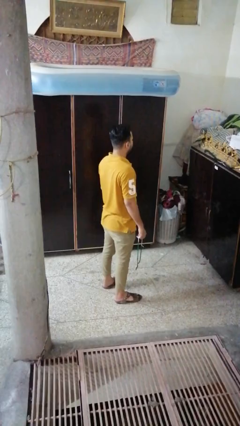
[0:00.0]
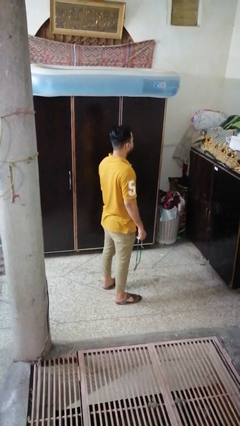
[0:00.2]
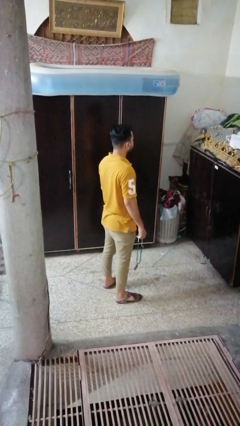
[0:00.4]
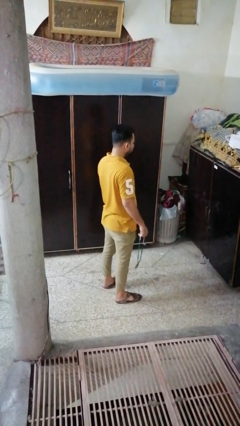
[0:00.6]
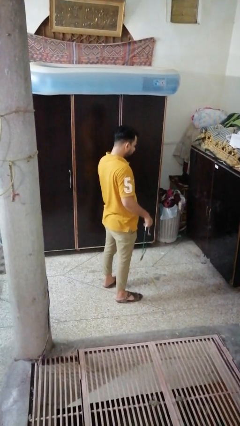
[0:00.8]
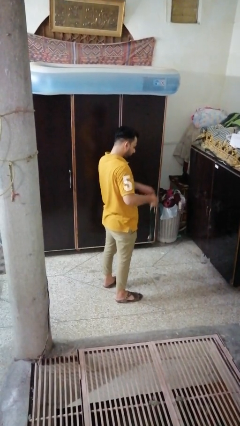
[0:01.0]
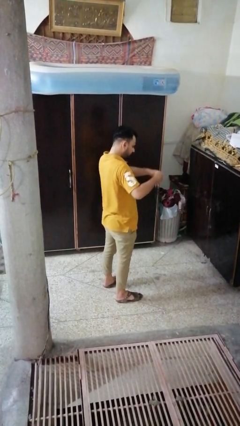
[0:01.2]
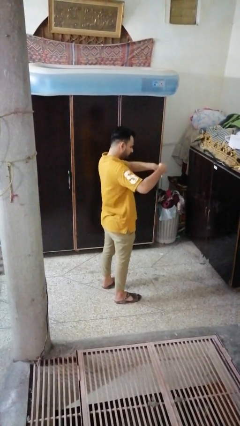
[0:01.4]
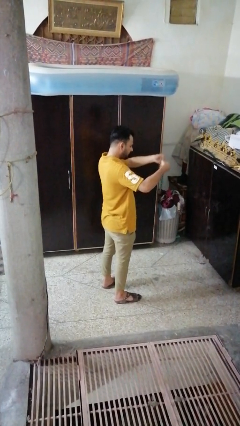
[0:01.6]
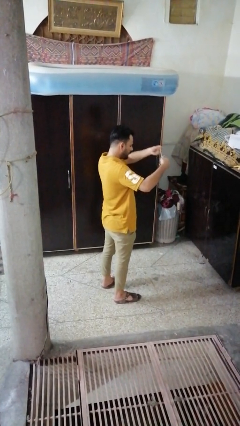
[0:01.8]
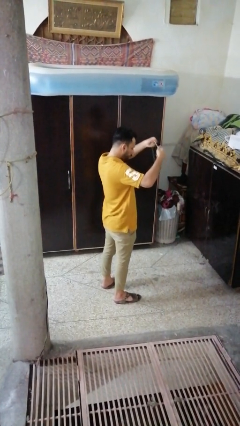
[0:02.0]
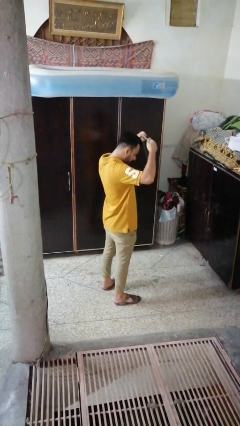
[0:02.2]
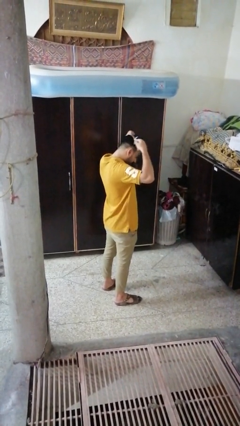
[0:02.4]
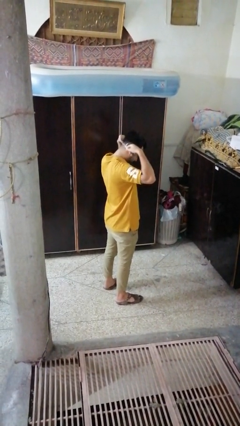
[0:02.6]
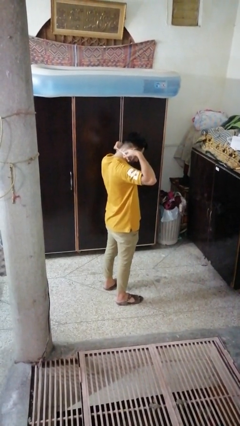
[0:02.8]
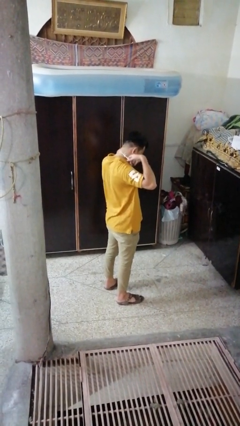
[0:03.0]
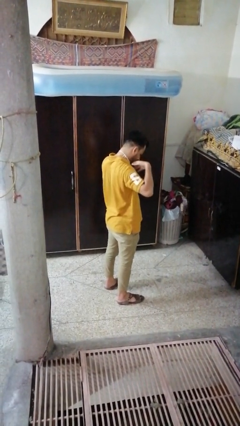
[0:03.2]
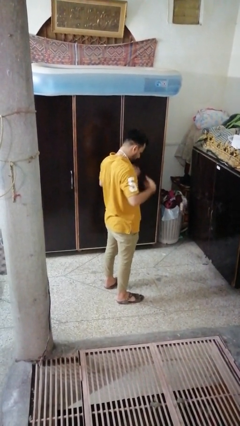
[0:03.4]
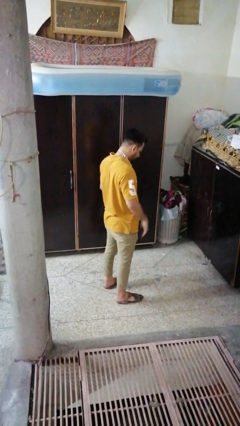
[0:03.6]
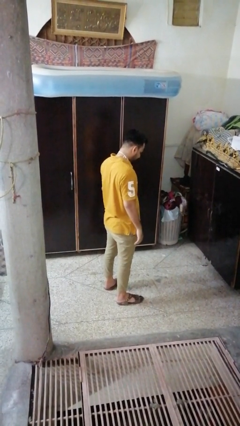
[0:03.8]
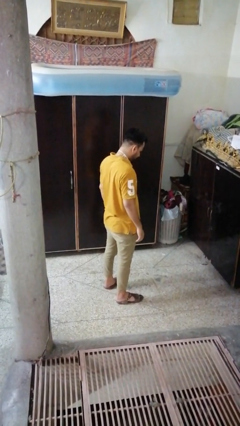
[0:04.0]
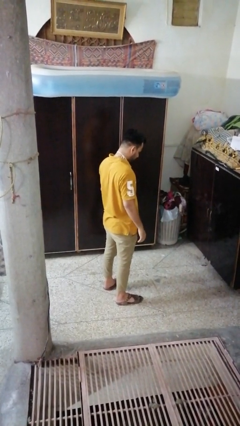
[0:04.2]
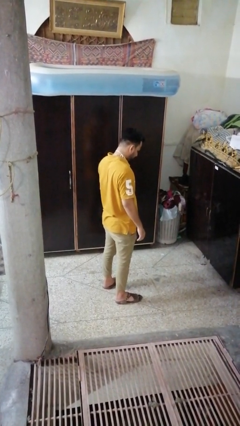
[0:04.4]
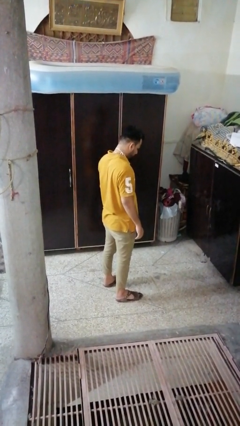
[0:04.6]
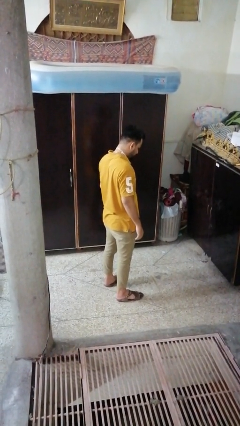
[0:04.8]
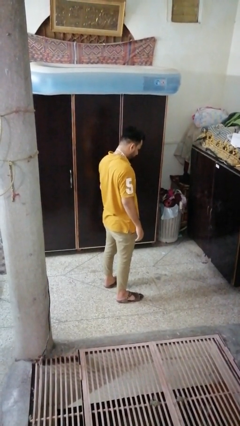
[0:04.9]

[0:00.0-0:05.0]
person puts on necklace

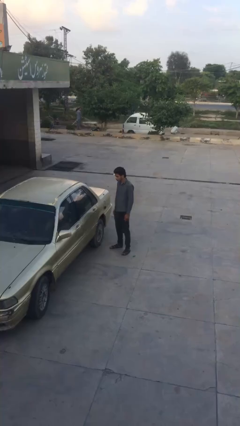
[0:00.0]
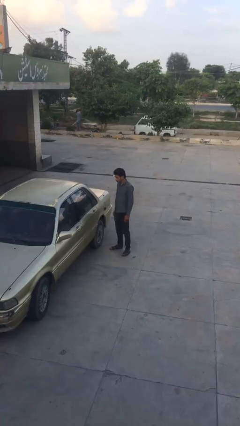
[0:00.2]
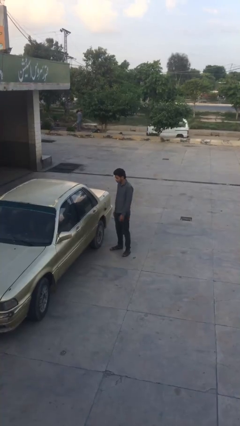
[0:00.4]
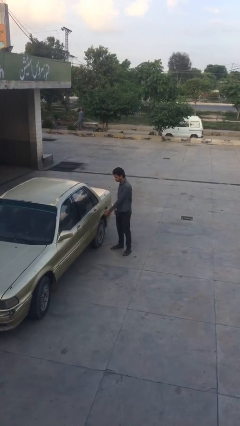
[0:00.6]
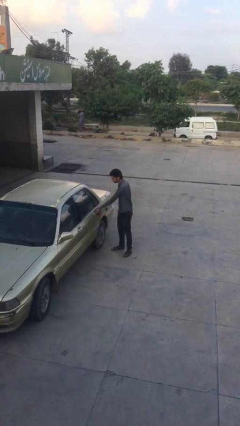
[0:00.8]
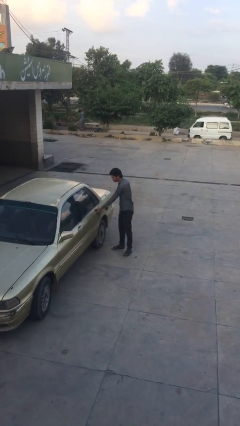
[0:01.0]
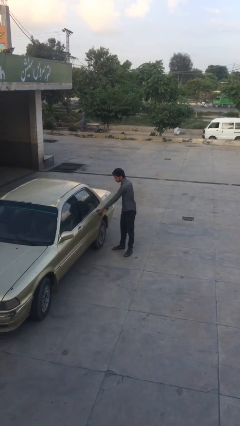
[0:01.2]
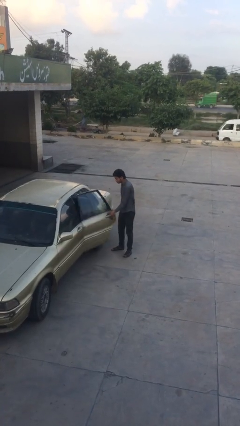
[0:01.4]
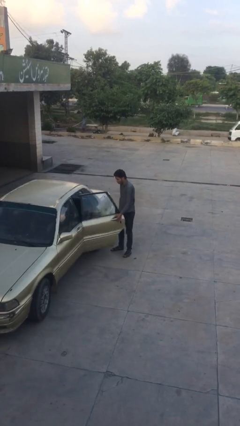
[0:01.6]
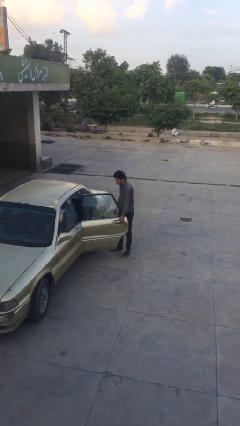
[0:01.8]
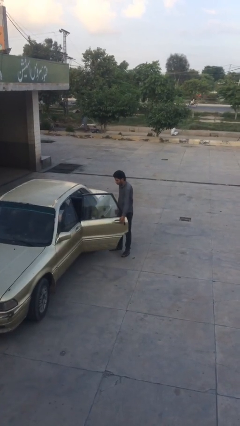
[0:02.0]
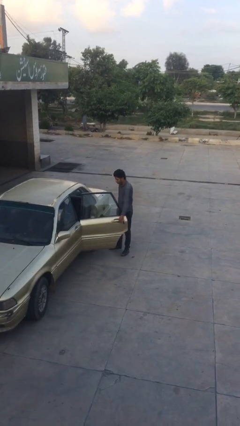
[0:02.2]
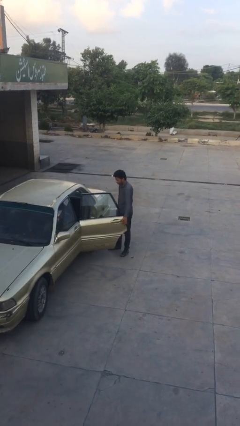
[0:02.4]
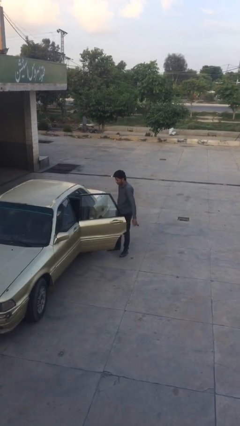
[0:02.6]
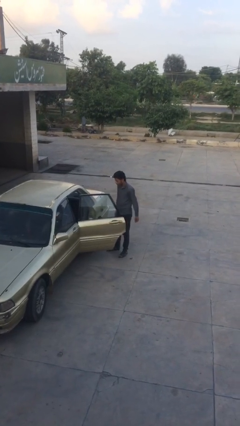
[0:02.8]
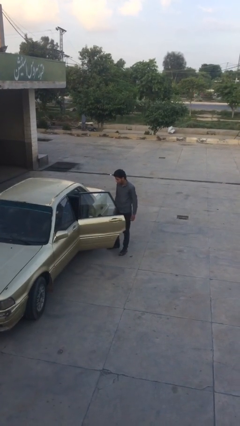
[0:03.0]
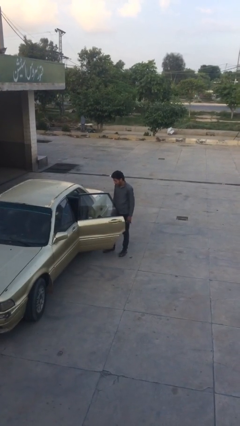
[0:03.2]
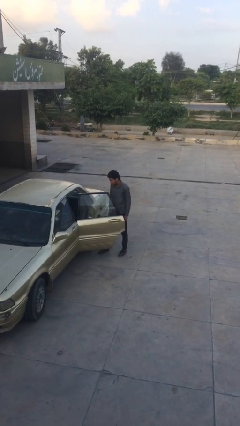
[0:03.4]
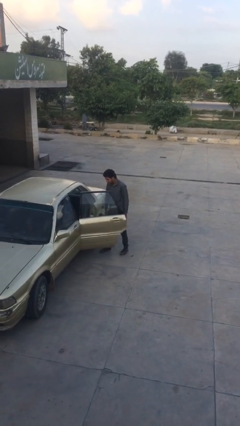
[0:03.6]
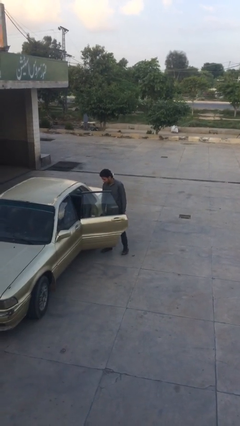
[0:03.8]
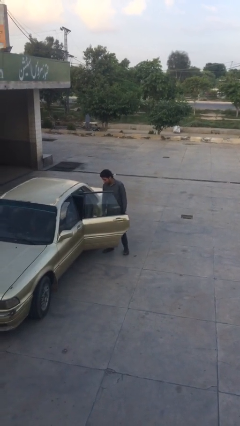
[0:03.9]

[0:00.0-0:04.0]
person opens car door

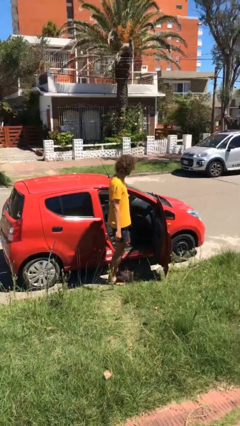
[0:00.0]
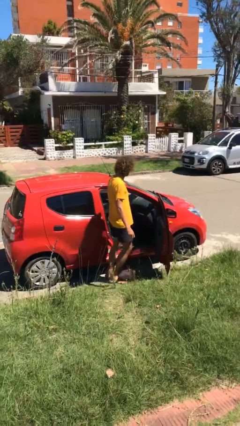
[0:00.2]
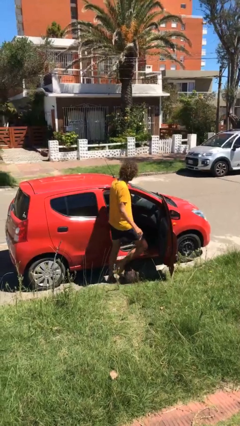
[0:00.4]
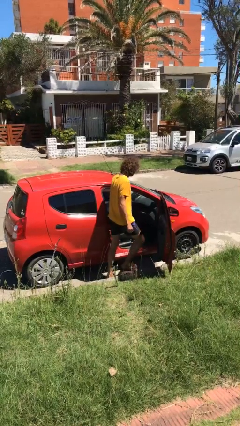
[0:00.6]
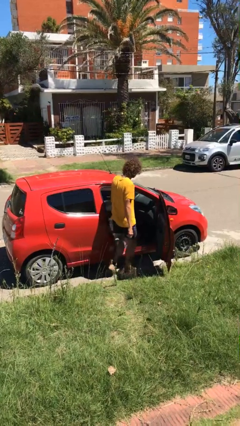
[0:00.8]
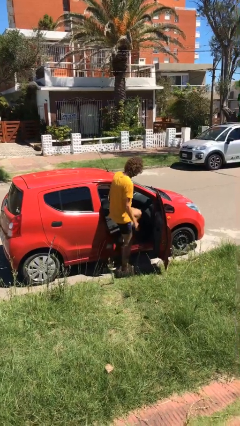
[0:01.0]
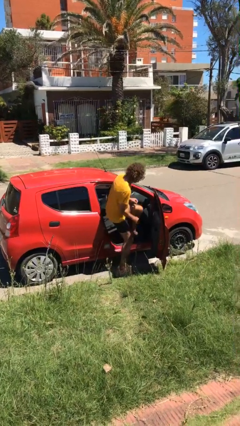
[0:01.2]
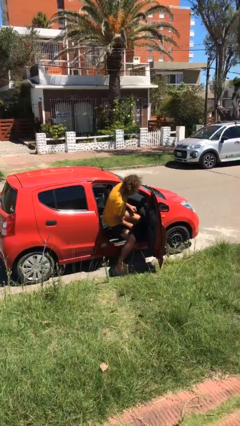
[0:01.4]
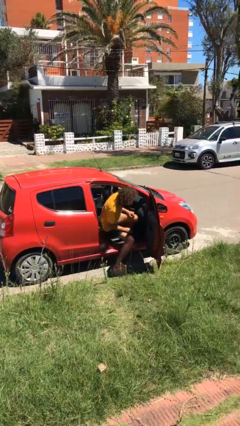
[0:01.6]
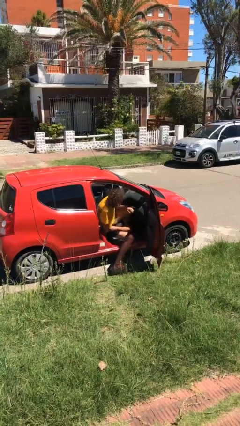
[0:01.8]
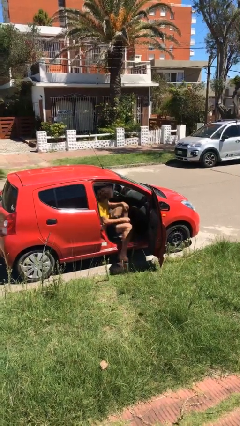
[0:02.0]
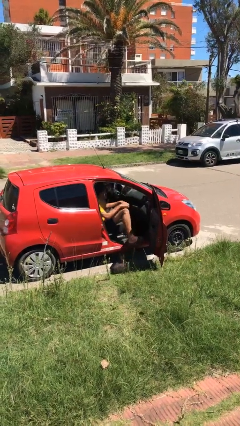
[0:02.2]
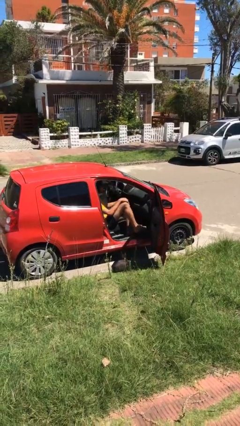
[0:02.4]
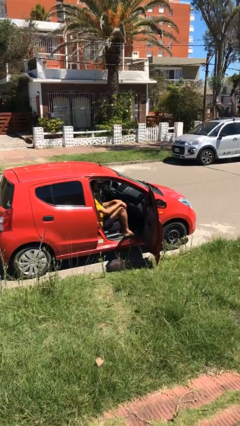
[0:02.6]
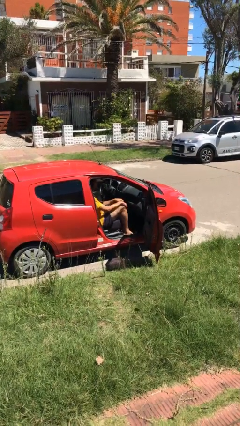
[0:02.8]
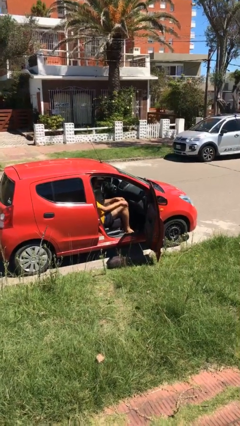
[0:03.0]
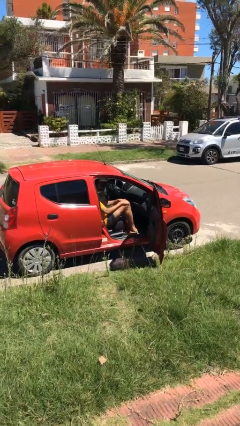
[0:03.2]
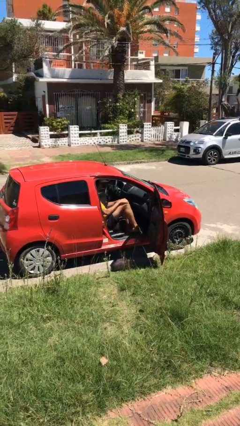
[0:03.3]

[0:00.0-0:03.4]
person enters car

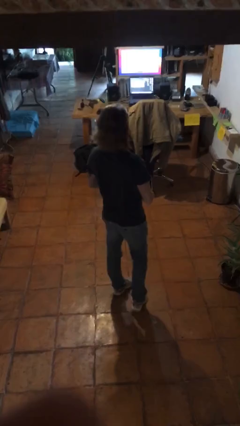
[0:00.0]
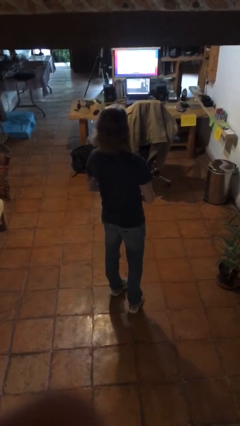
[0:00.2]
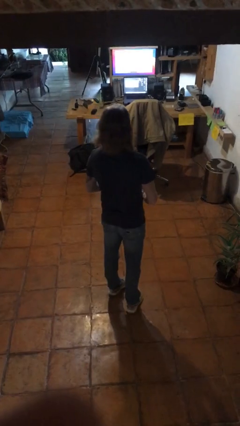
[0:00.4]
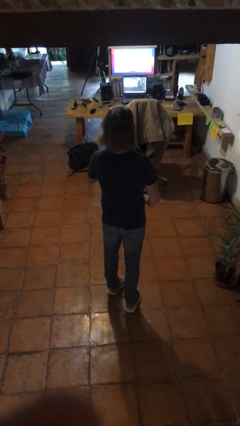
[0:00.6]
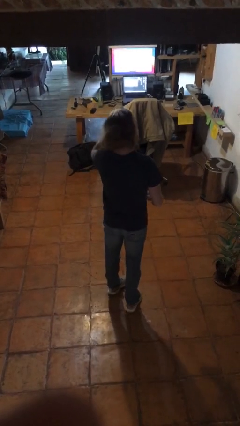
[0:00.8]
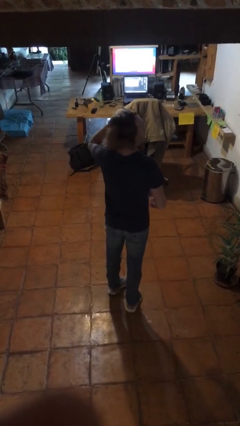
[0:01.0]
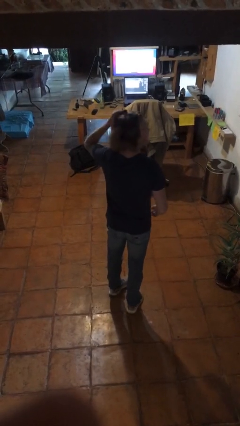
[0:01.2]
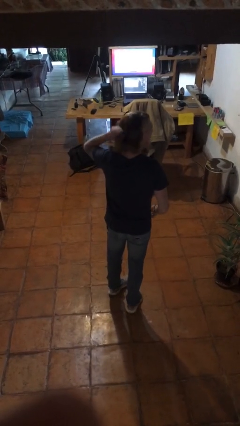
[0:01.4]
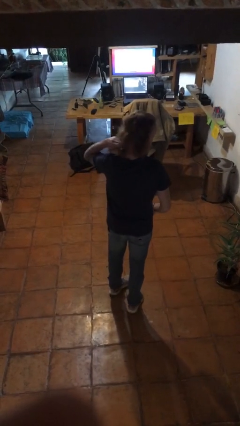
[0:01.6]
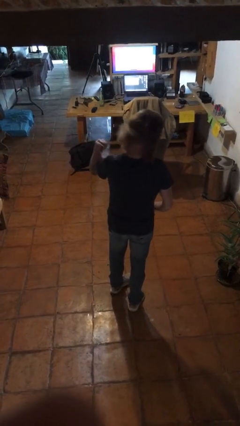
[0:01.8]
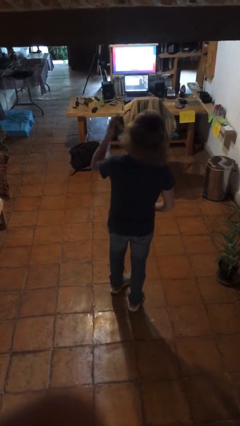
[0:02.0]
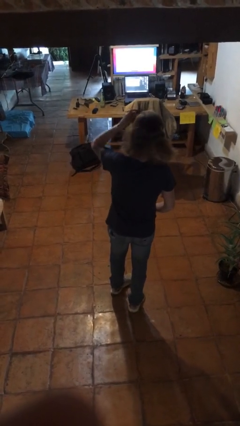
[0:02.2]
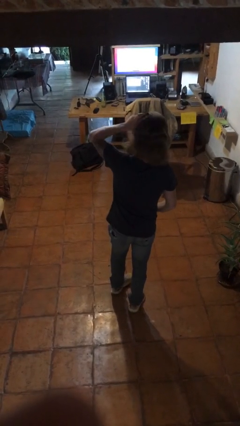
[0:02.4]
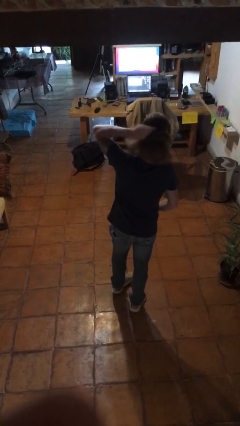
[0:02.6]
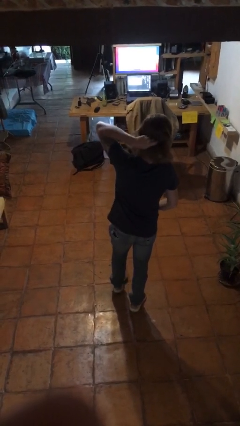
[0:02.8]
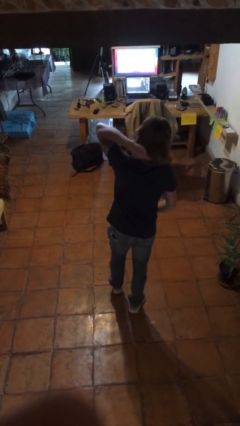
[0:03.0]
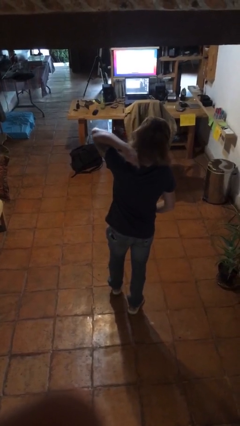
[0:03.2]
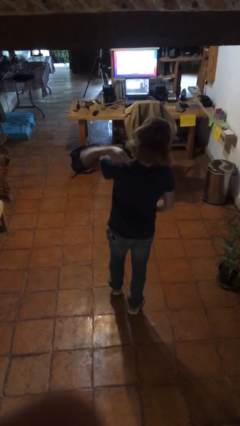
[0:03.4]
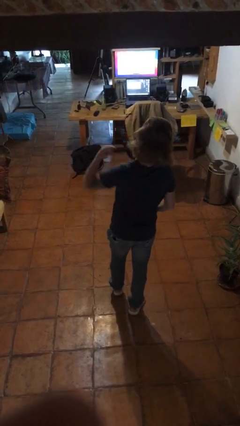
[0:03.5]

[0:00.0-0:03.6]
person brushes hair

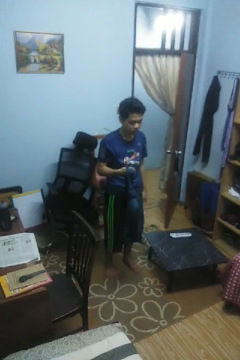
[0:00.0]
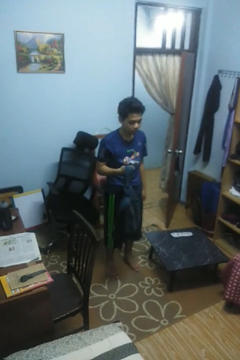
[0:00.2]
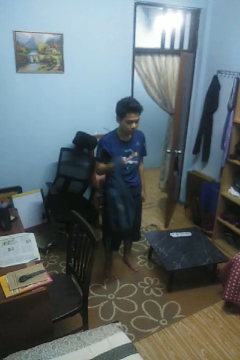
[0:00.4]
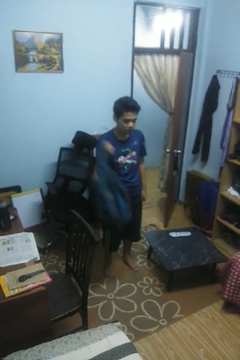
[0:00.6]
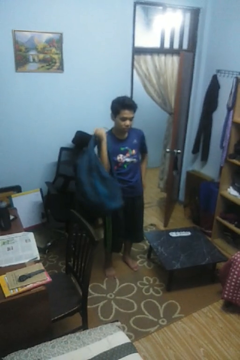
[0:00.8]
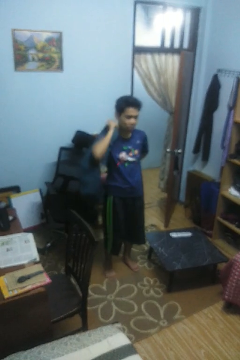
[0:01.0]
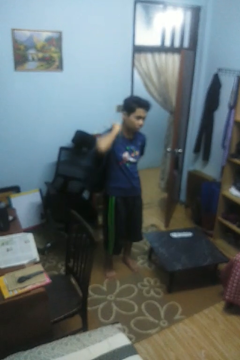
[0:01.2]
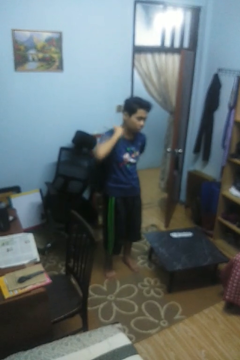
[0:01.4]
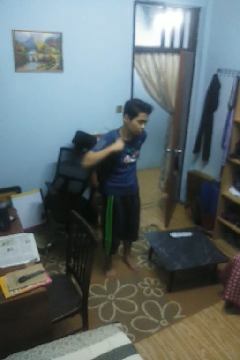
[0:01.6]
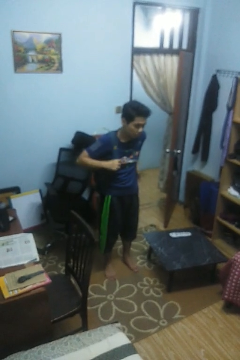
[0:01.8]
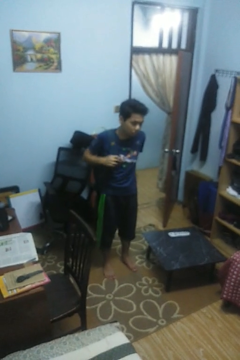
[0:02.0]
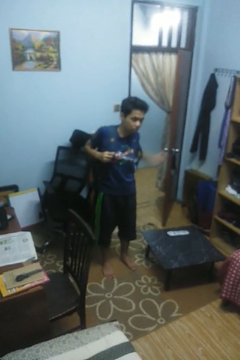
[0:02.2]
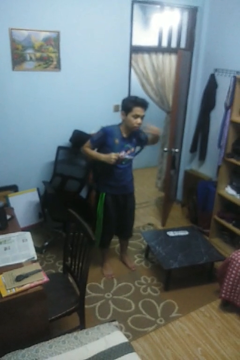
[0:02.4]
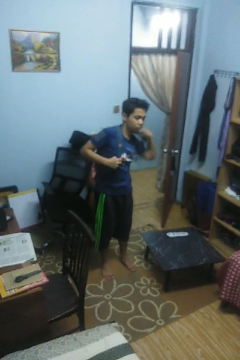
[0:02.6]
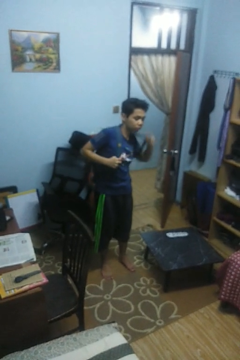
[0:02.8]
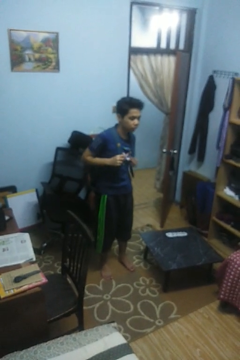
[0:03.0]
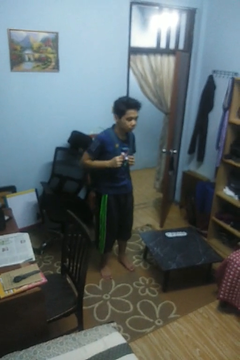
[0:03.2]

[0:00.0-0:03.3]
person puts on backpack
